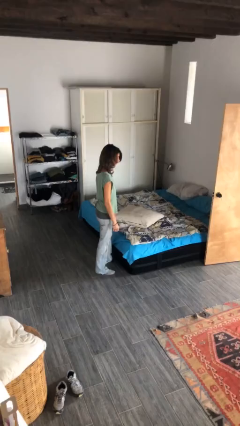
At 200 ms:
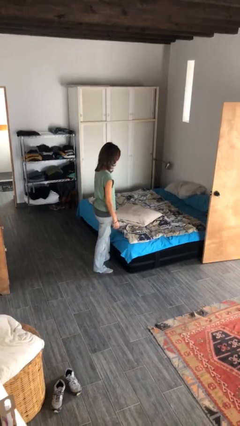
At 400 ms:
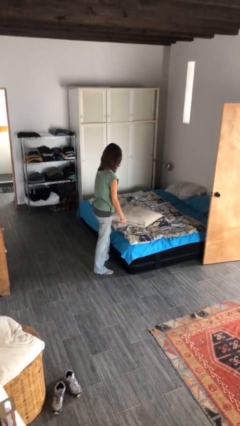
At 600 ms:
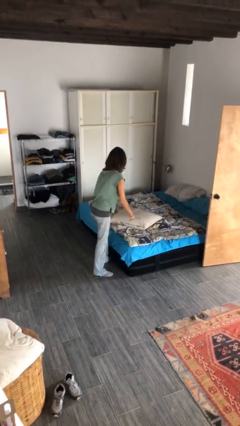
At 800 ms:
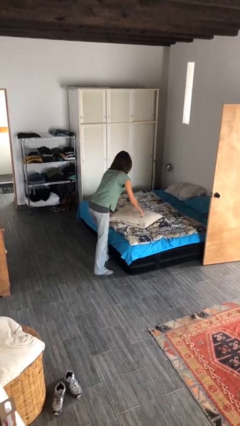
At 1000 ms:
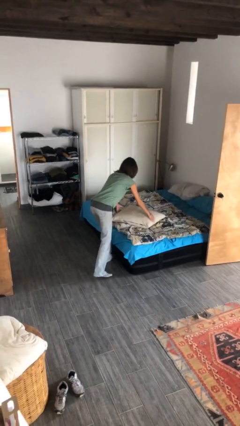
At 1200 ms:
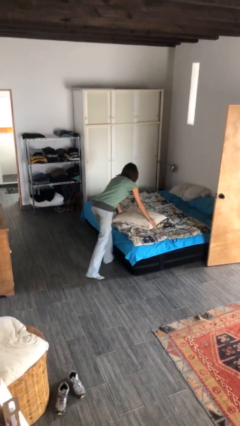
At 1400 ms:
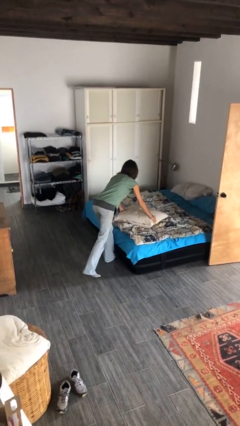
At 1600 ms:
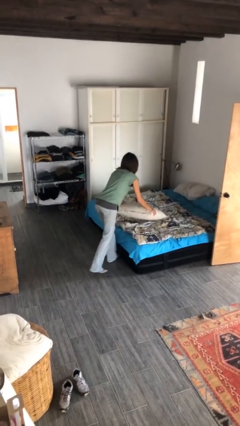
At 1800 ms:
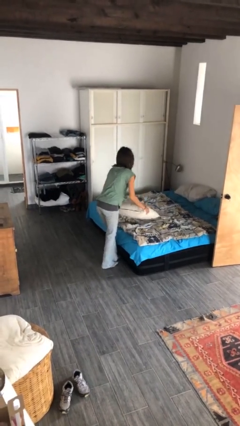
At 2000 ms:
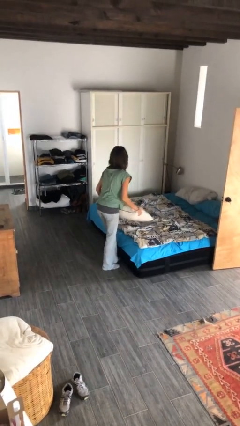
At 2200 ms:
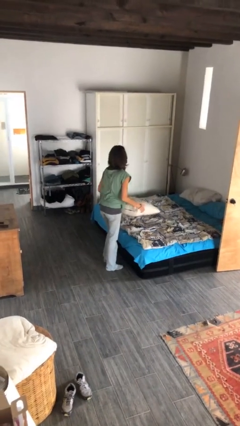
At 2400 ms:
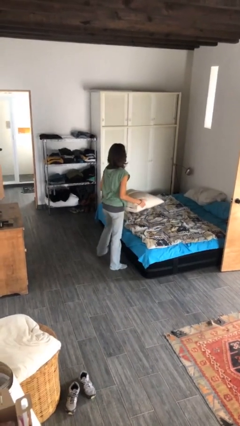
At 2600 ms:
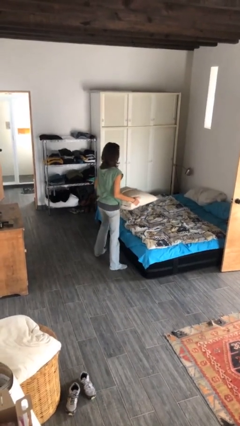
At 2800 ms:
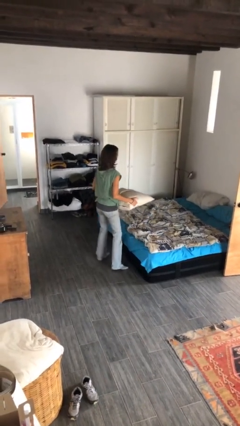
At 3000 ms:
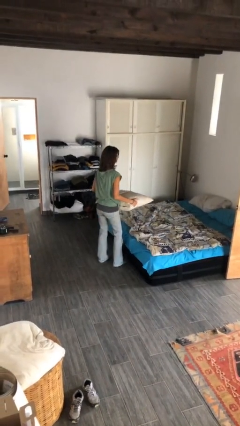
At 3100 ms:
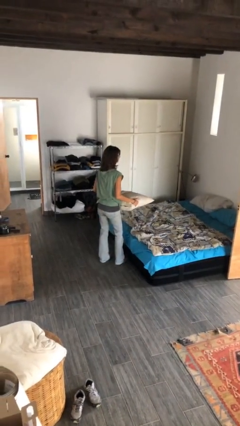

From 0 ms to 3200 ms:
person picks up object from bed

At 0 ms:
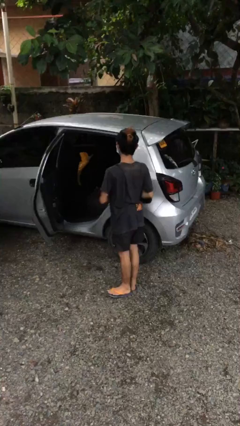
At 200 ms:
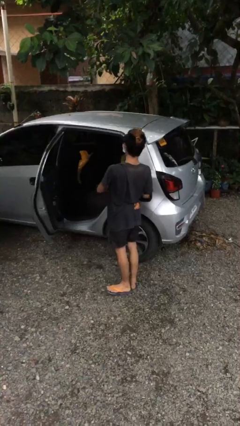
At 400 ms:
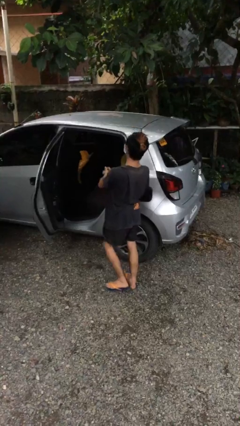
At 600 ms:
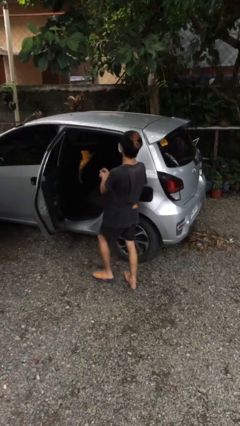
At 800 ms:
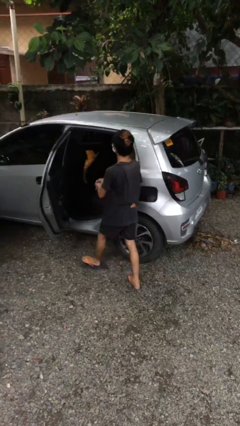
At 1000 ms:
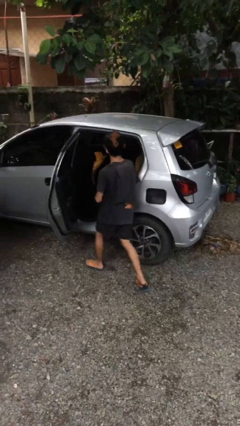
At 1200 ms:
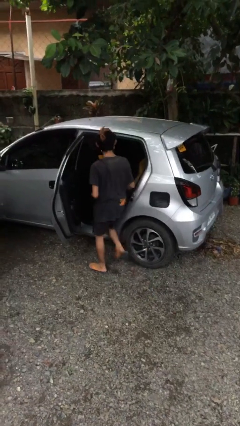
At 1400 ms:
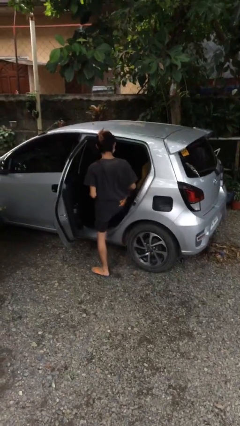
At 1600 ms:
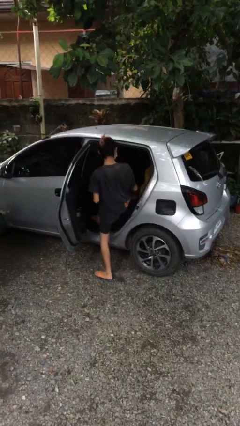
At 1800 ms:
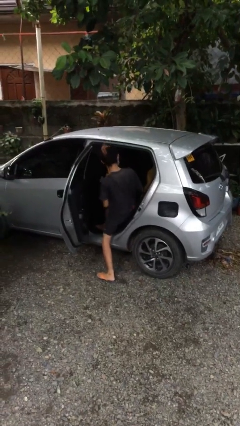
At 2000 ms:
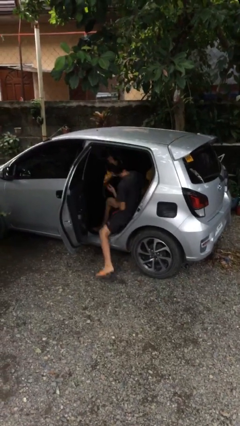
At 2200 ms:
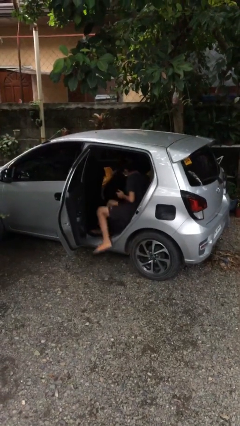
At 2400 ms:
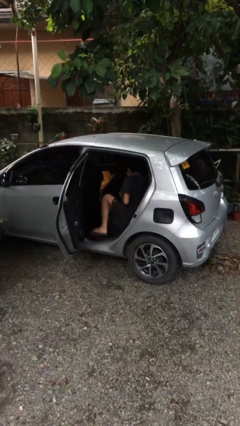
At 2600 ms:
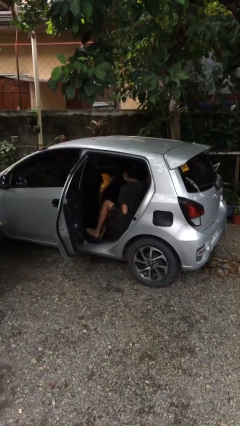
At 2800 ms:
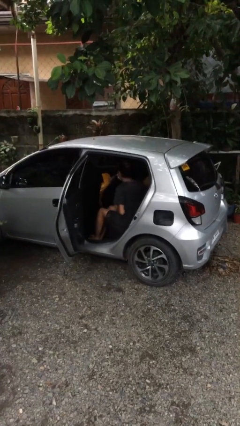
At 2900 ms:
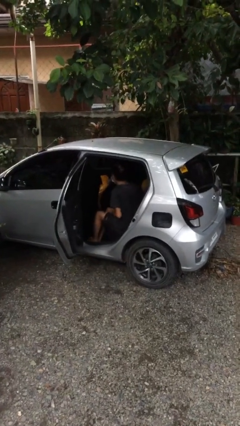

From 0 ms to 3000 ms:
person enters car

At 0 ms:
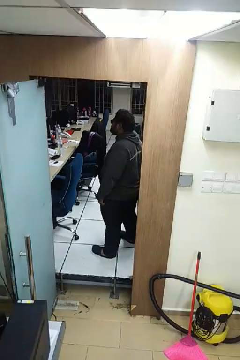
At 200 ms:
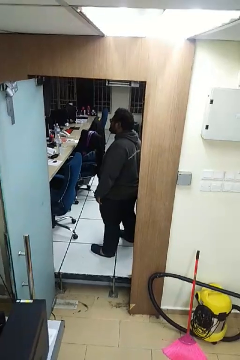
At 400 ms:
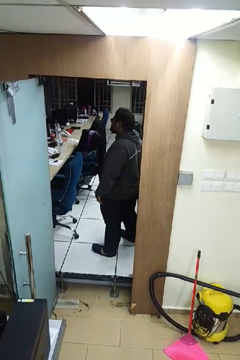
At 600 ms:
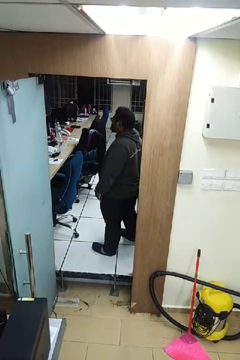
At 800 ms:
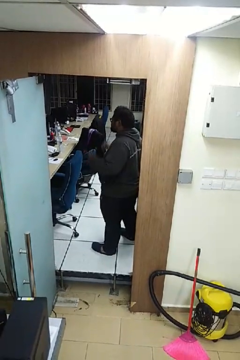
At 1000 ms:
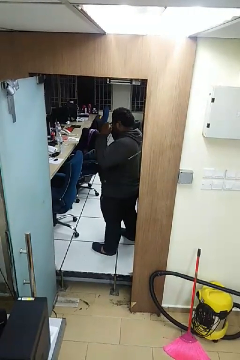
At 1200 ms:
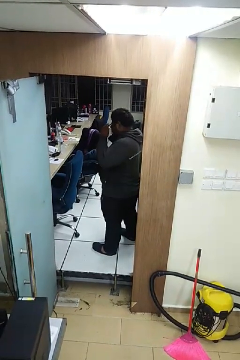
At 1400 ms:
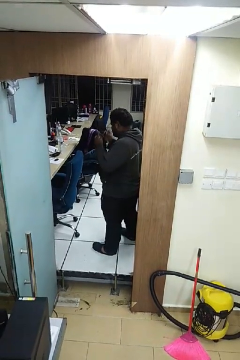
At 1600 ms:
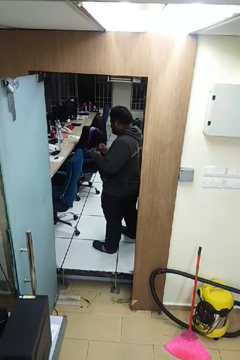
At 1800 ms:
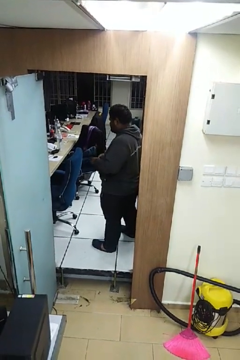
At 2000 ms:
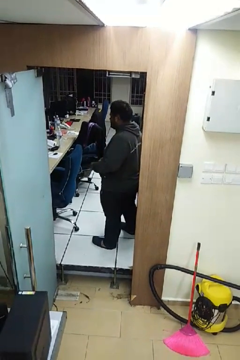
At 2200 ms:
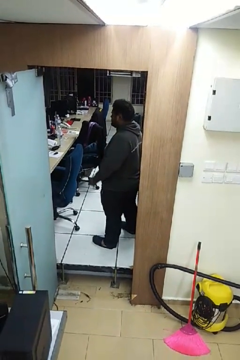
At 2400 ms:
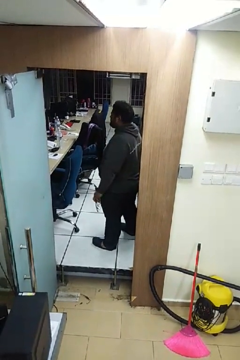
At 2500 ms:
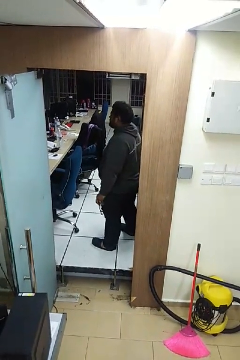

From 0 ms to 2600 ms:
person takes off glasses

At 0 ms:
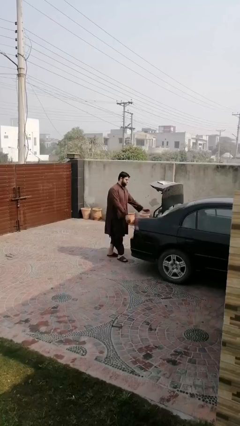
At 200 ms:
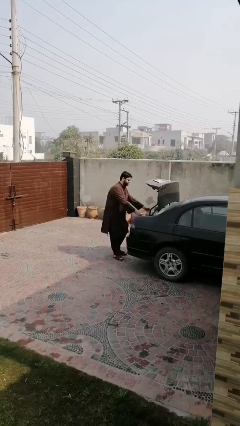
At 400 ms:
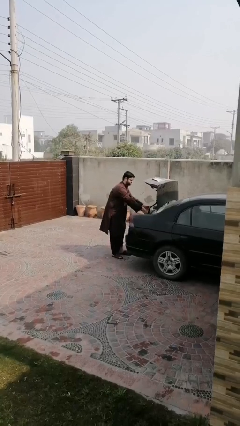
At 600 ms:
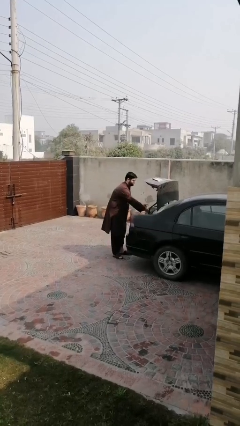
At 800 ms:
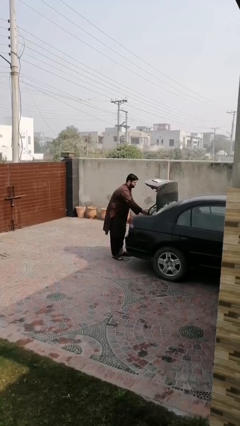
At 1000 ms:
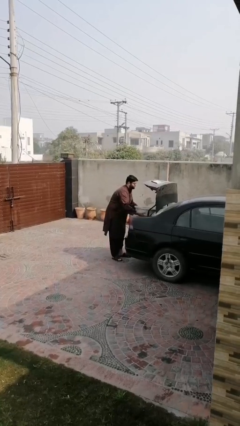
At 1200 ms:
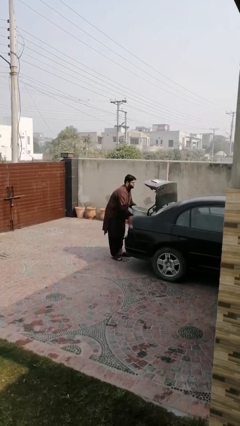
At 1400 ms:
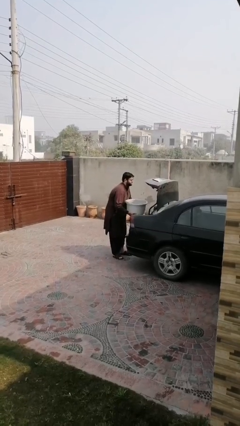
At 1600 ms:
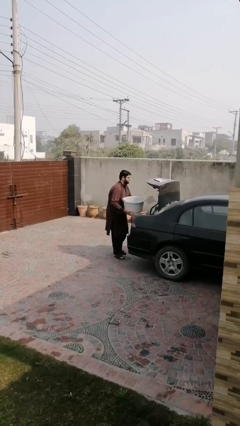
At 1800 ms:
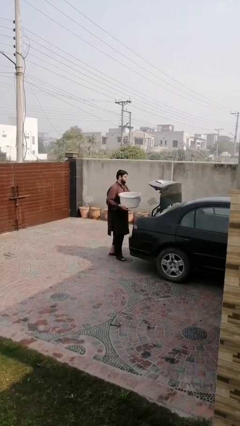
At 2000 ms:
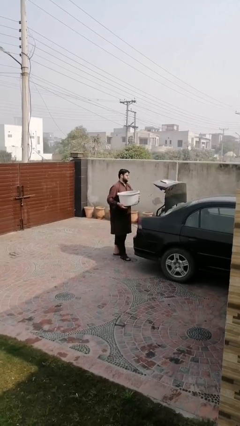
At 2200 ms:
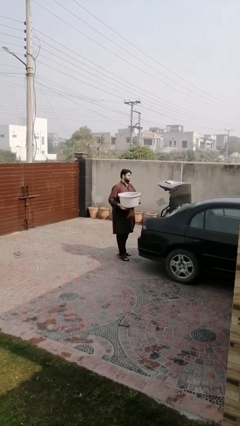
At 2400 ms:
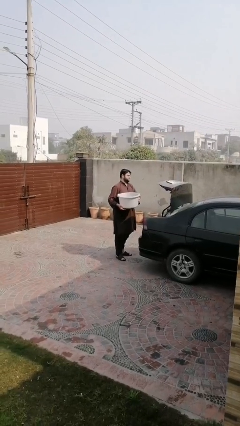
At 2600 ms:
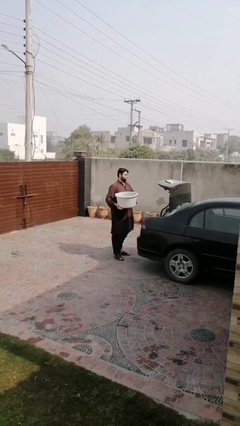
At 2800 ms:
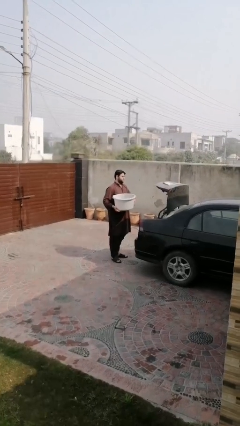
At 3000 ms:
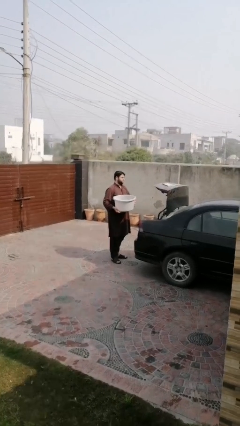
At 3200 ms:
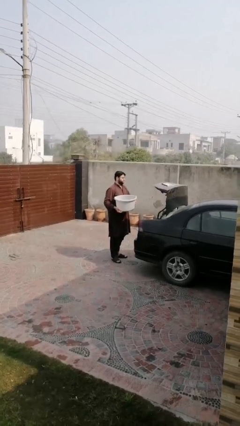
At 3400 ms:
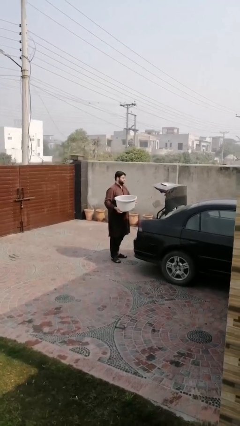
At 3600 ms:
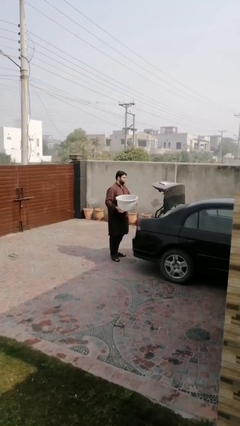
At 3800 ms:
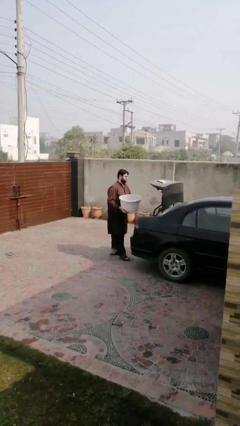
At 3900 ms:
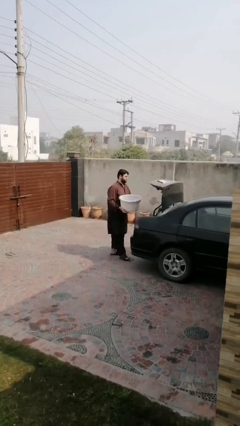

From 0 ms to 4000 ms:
person unloads car

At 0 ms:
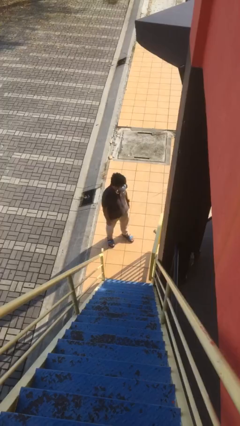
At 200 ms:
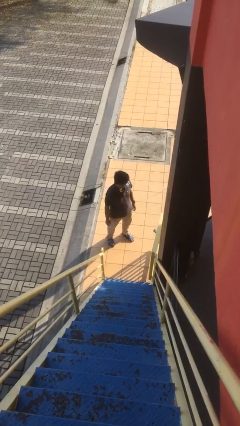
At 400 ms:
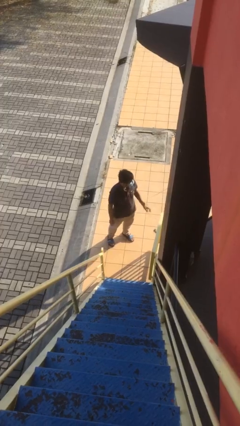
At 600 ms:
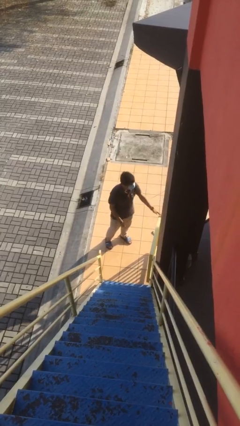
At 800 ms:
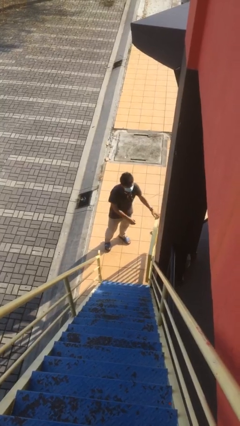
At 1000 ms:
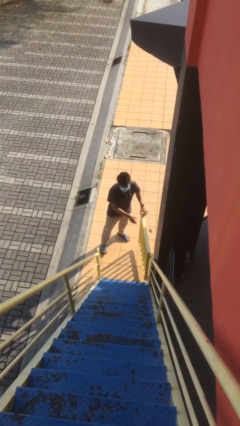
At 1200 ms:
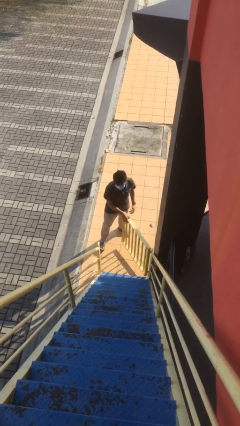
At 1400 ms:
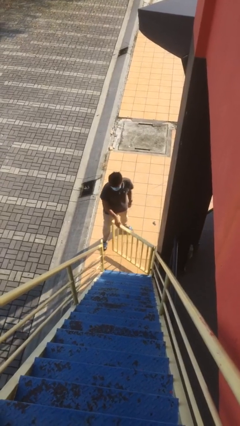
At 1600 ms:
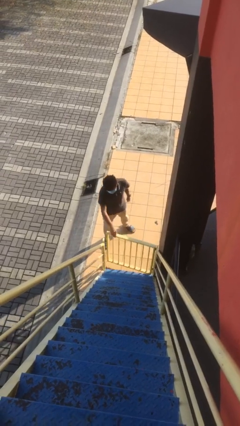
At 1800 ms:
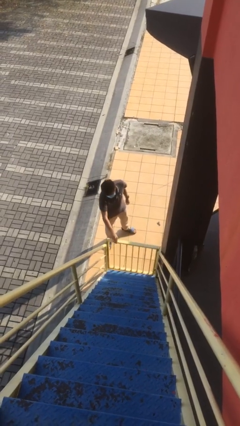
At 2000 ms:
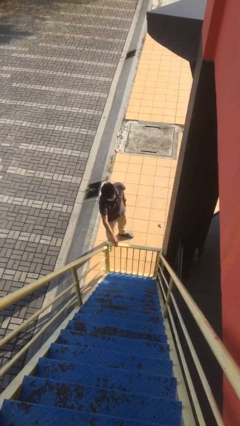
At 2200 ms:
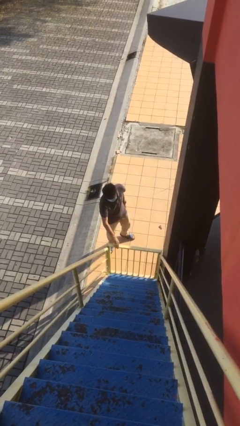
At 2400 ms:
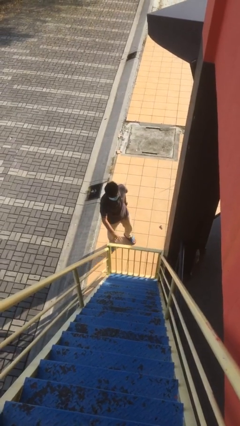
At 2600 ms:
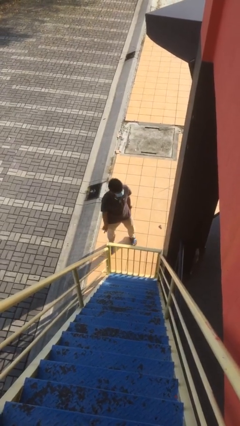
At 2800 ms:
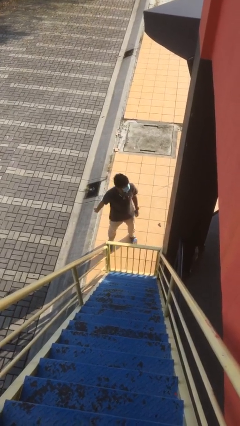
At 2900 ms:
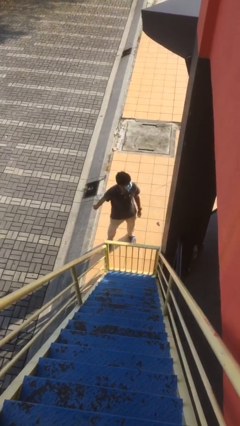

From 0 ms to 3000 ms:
person closes facility door

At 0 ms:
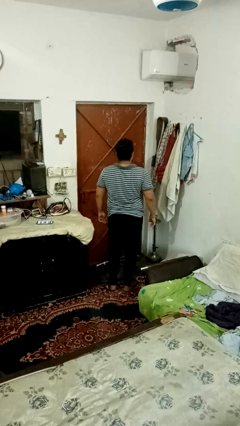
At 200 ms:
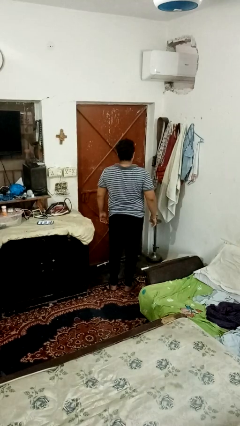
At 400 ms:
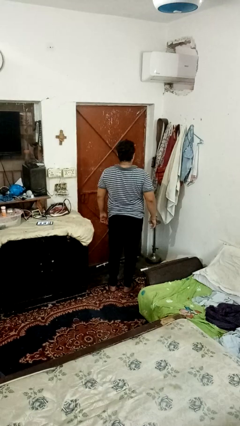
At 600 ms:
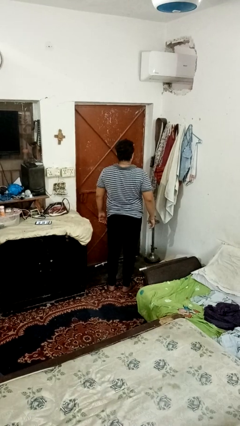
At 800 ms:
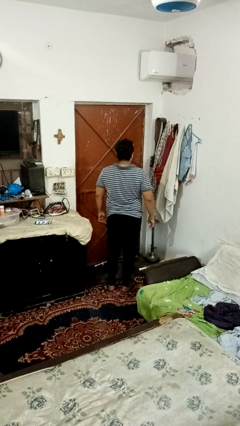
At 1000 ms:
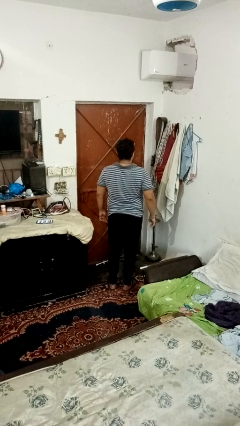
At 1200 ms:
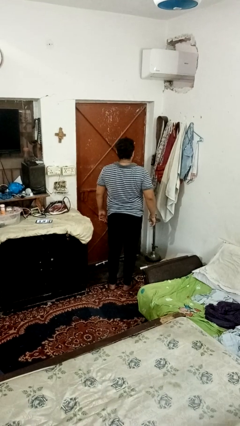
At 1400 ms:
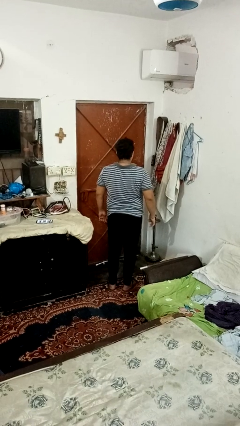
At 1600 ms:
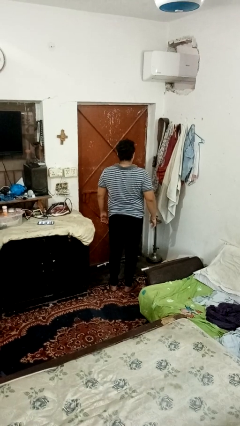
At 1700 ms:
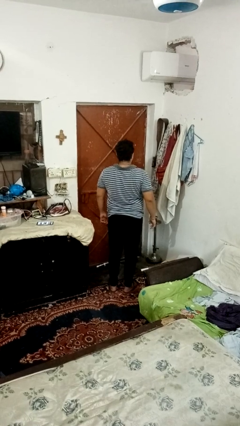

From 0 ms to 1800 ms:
person dances in place

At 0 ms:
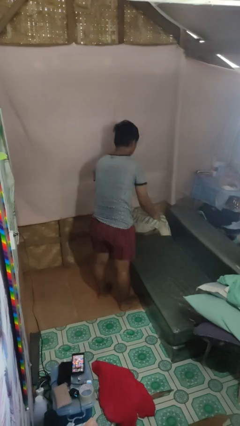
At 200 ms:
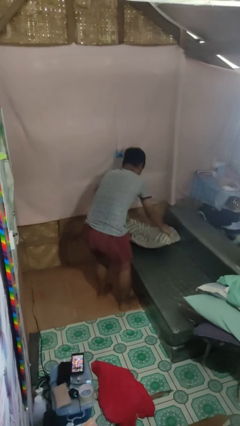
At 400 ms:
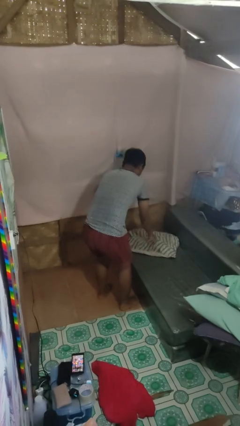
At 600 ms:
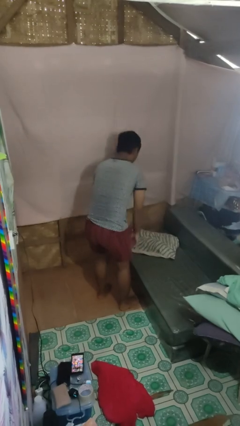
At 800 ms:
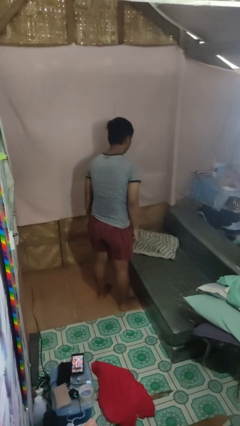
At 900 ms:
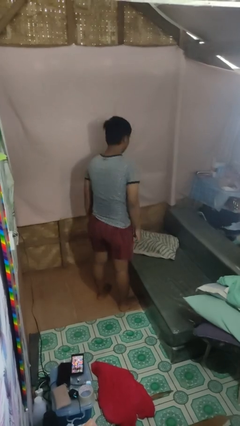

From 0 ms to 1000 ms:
person puts down object on couch
